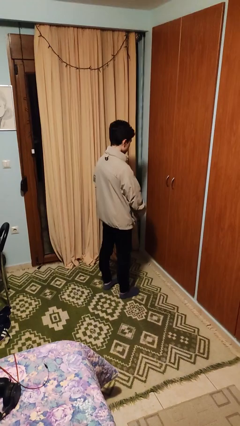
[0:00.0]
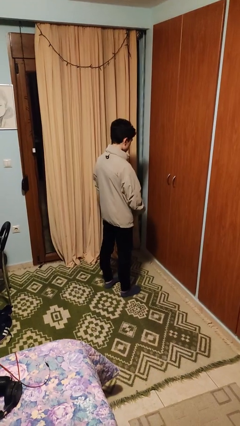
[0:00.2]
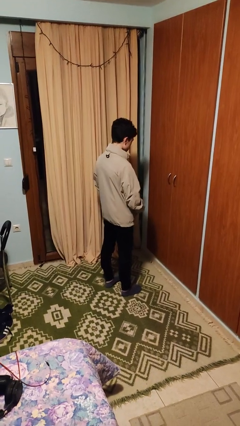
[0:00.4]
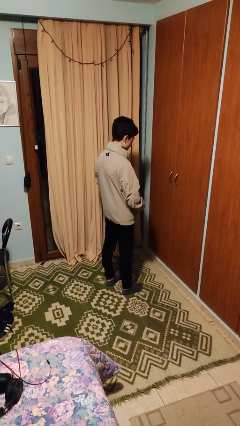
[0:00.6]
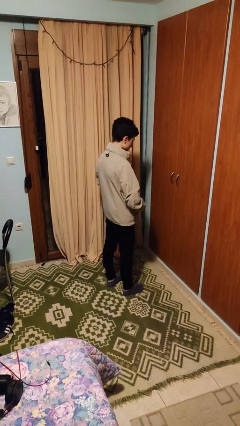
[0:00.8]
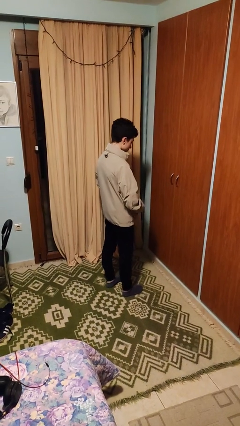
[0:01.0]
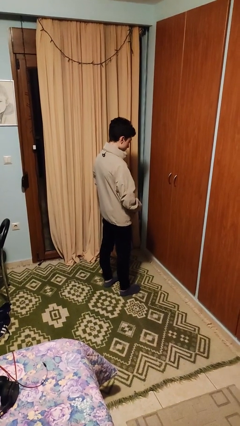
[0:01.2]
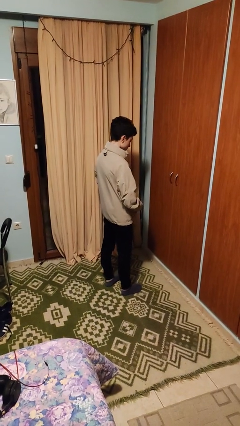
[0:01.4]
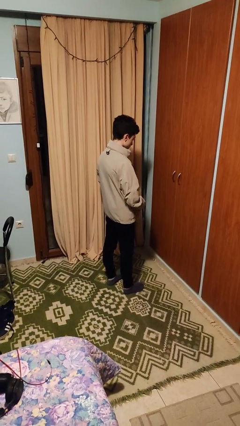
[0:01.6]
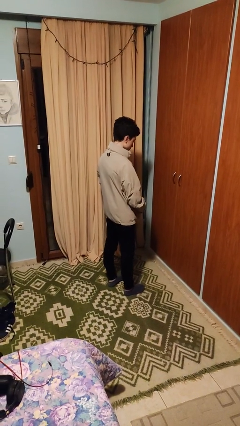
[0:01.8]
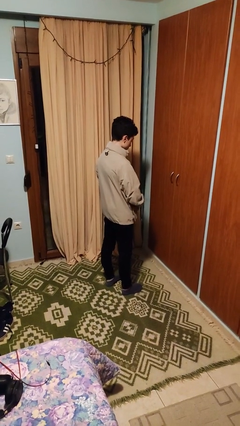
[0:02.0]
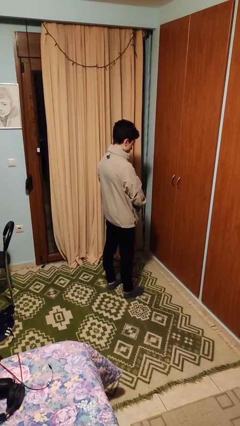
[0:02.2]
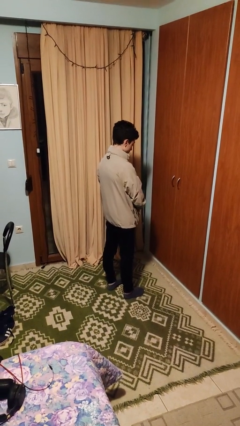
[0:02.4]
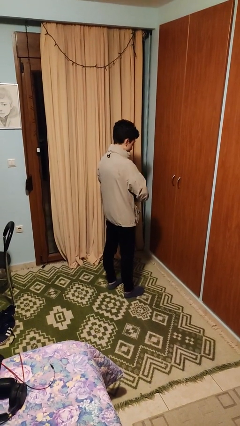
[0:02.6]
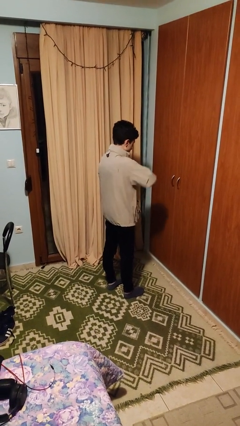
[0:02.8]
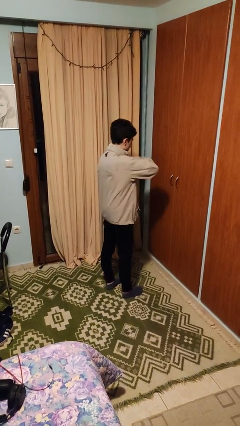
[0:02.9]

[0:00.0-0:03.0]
person zips up jacket

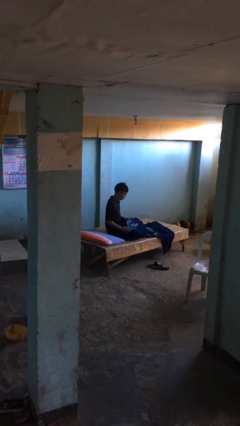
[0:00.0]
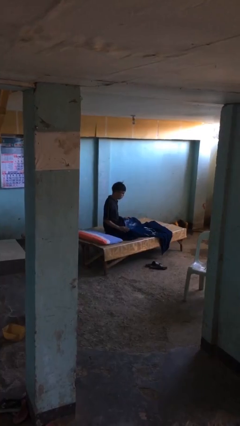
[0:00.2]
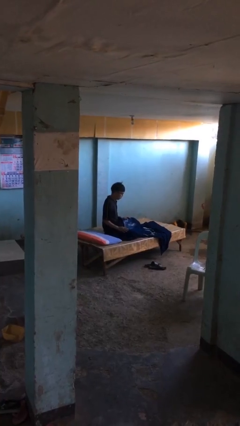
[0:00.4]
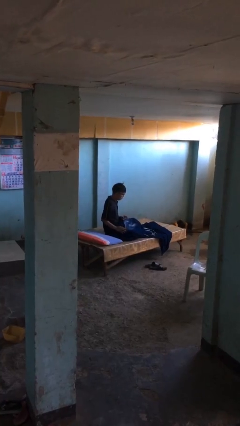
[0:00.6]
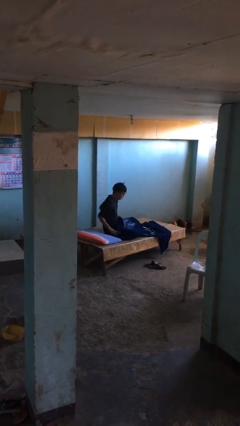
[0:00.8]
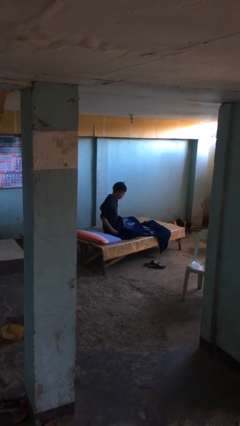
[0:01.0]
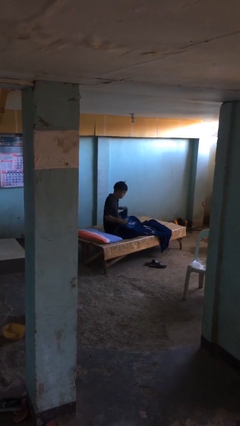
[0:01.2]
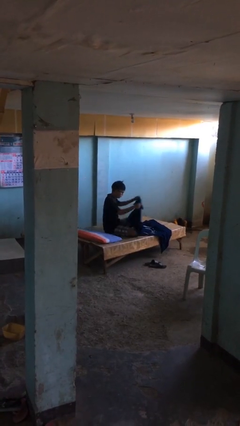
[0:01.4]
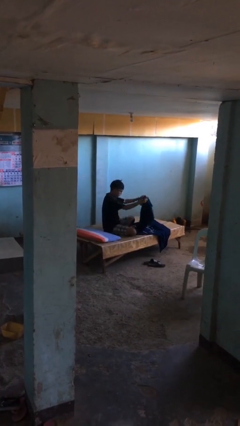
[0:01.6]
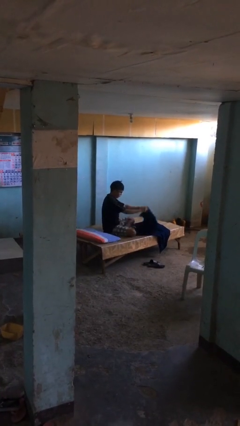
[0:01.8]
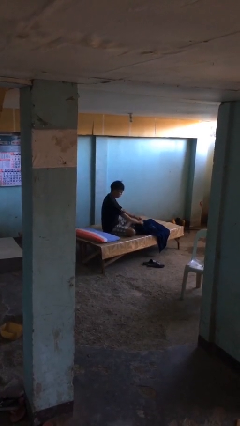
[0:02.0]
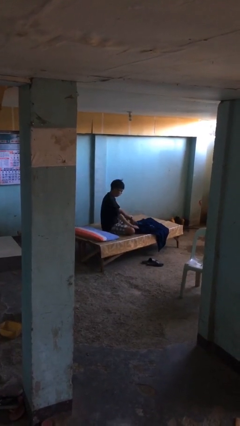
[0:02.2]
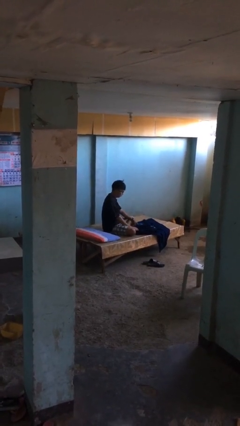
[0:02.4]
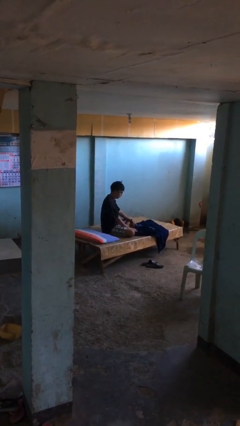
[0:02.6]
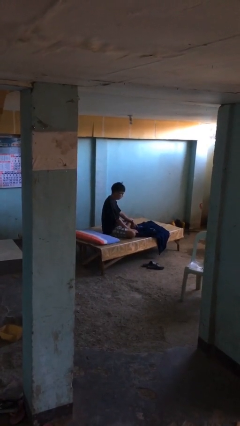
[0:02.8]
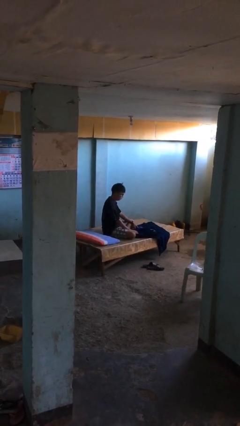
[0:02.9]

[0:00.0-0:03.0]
person uncovers with blanket

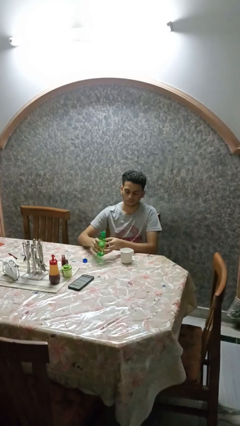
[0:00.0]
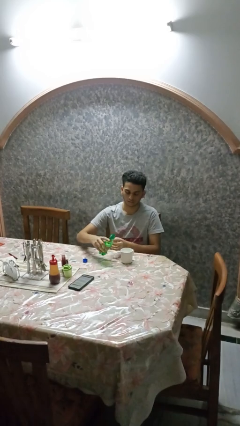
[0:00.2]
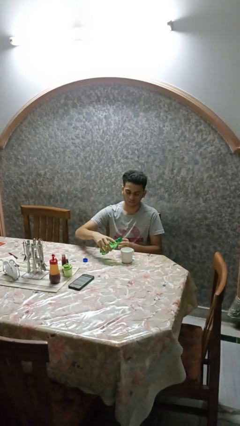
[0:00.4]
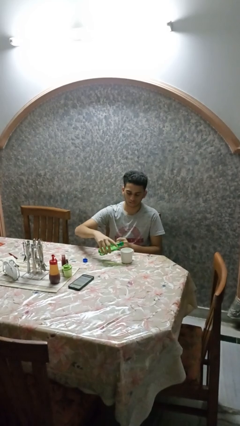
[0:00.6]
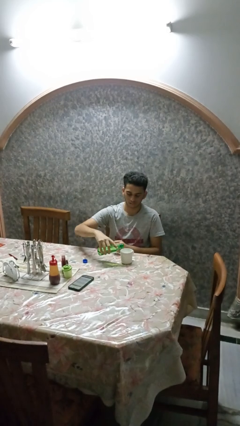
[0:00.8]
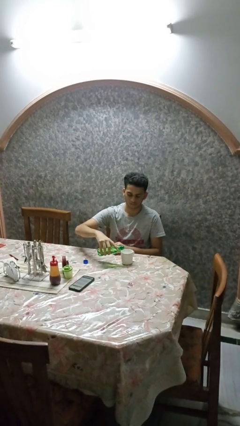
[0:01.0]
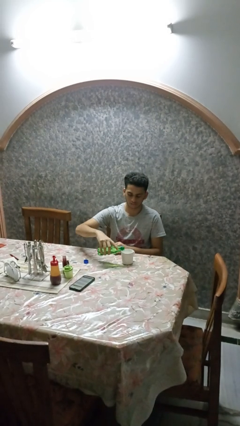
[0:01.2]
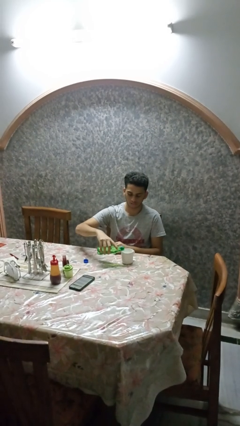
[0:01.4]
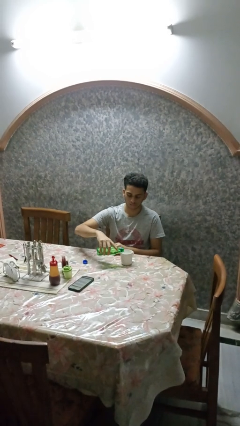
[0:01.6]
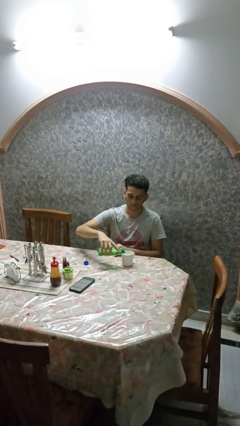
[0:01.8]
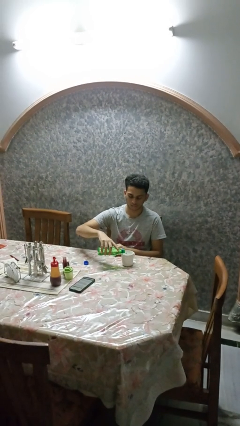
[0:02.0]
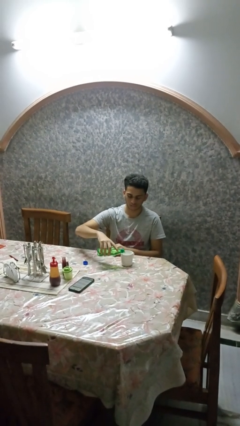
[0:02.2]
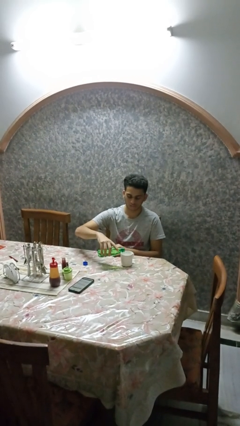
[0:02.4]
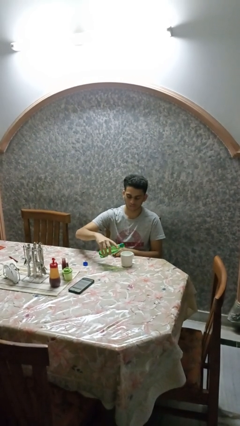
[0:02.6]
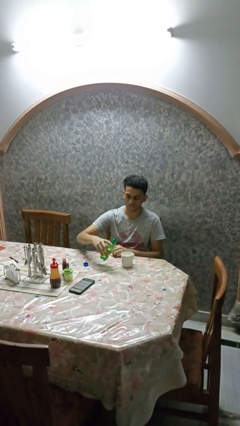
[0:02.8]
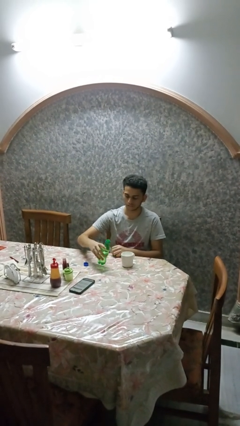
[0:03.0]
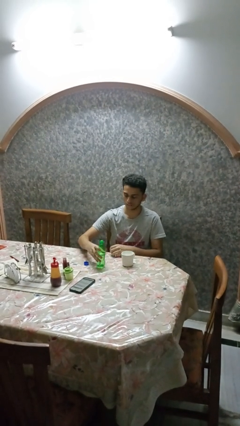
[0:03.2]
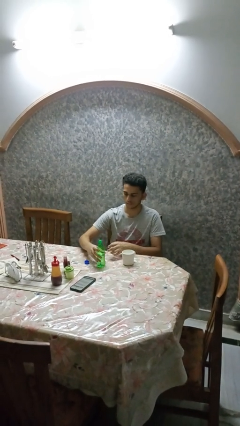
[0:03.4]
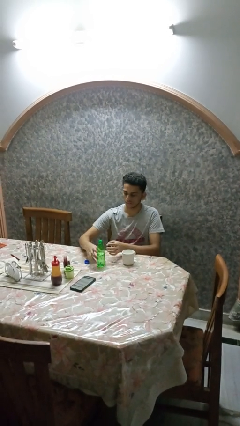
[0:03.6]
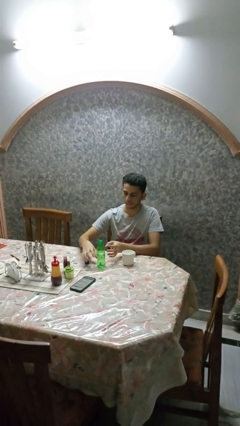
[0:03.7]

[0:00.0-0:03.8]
person pours liquid into cup

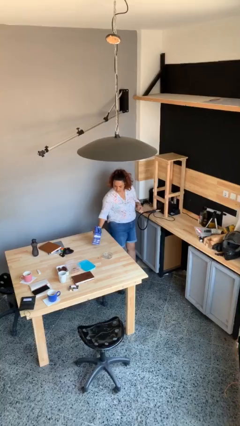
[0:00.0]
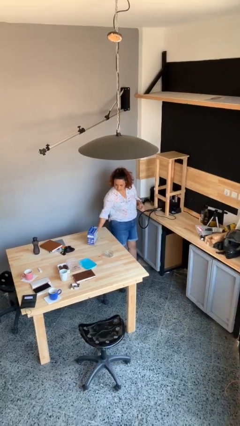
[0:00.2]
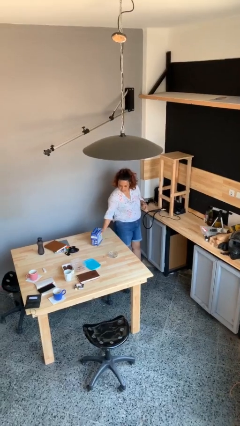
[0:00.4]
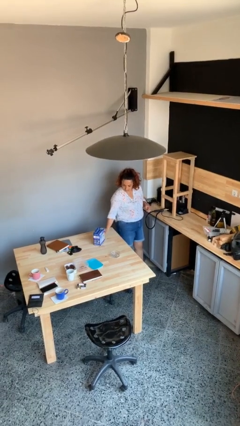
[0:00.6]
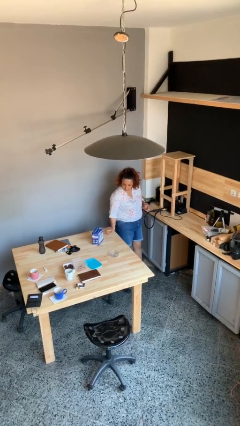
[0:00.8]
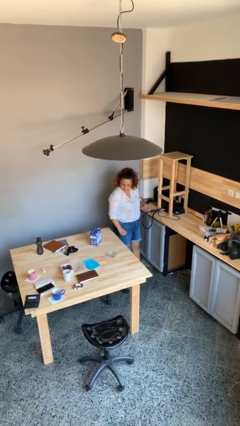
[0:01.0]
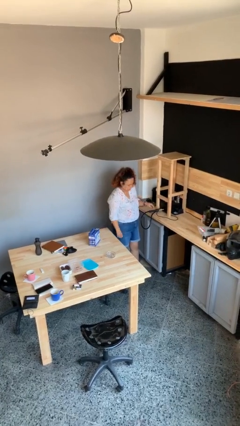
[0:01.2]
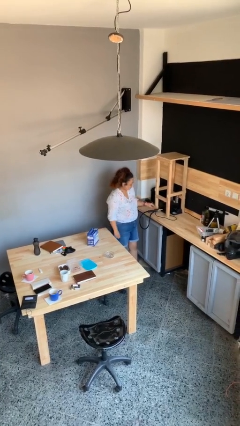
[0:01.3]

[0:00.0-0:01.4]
person puts down object on table

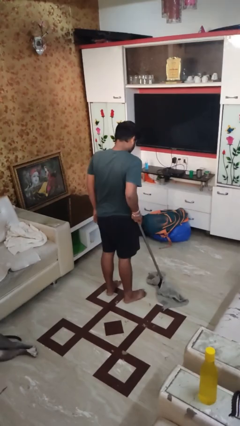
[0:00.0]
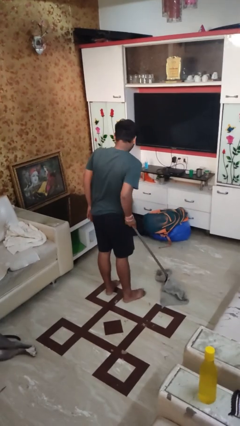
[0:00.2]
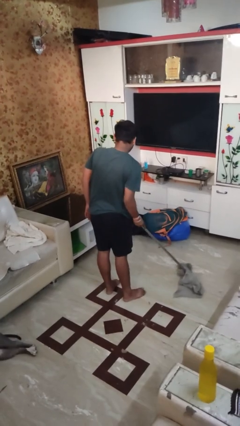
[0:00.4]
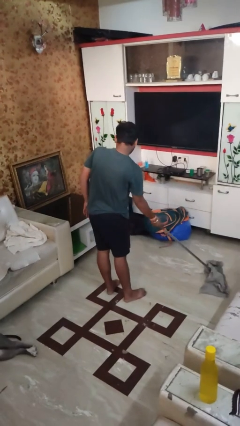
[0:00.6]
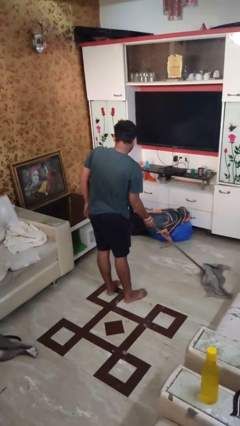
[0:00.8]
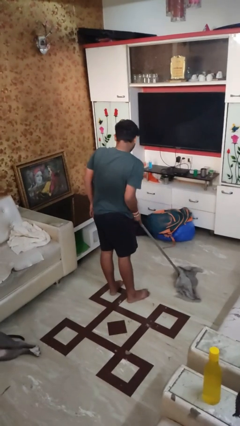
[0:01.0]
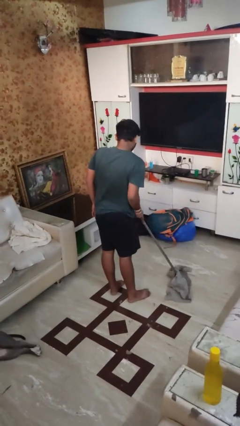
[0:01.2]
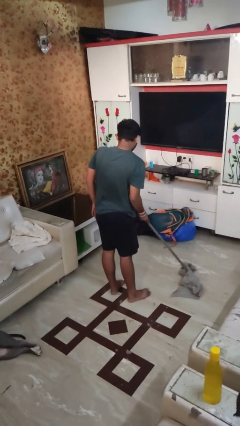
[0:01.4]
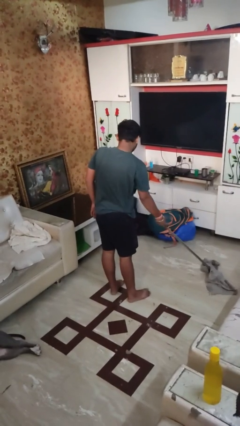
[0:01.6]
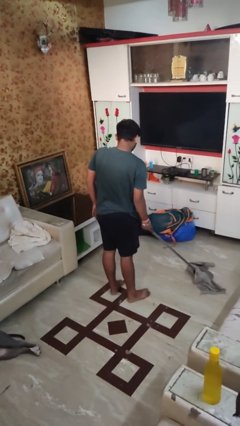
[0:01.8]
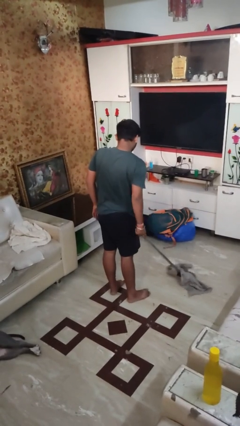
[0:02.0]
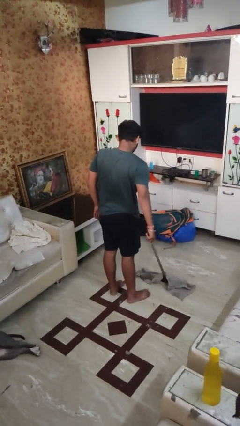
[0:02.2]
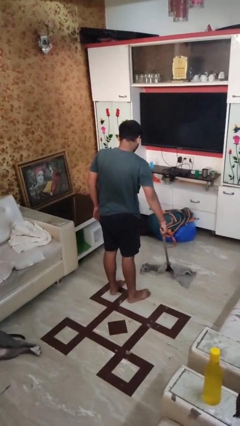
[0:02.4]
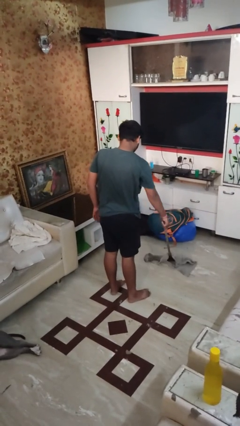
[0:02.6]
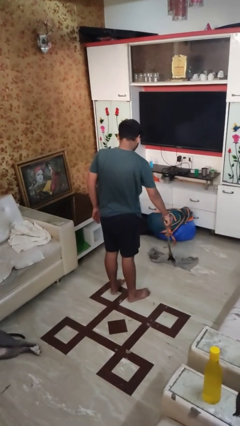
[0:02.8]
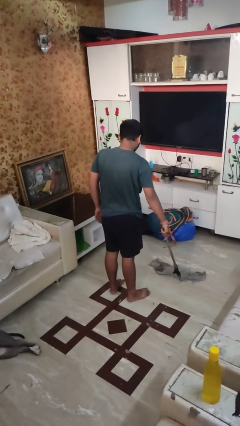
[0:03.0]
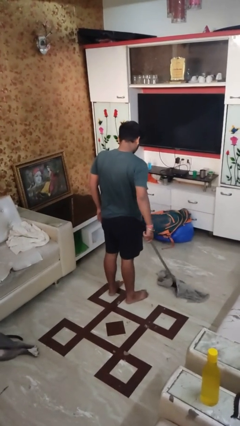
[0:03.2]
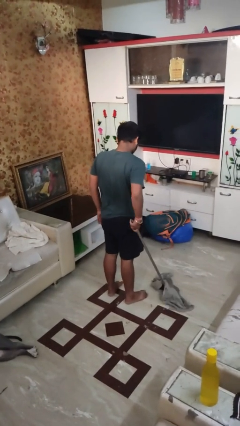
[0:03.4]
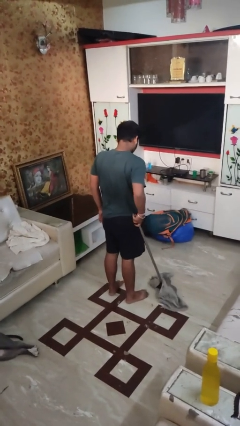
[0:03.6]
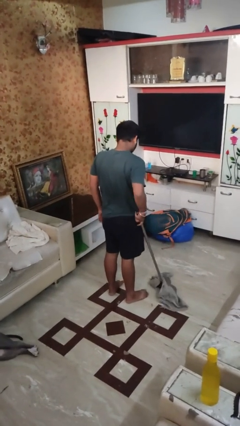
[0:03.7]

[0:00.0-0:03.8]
person mops

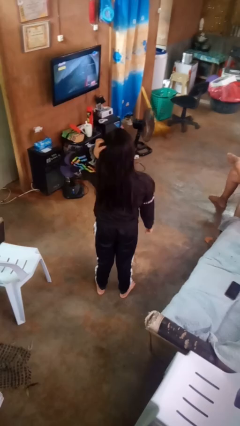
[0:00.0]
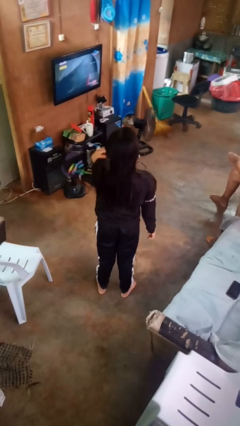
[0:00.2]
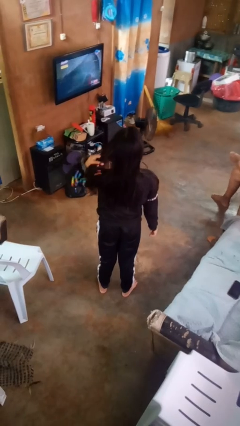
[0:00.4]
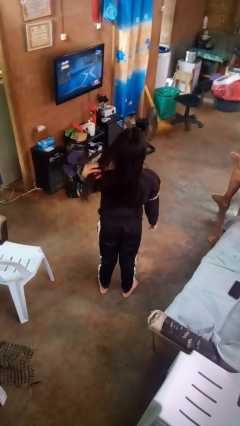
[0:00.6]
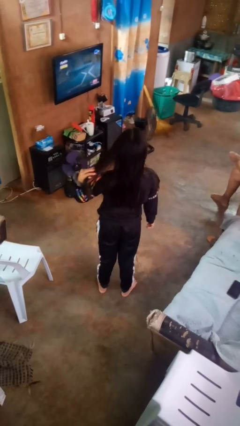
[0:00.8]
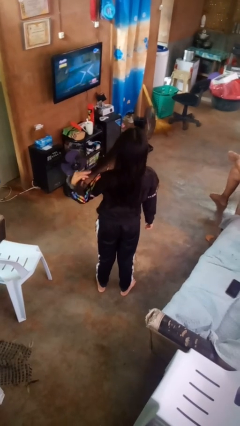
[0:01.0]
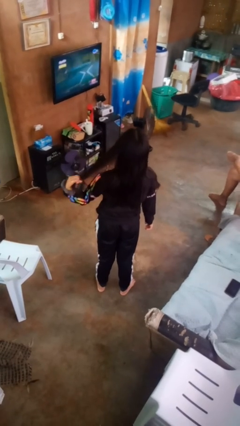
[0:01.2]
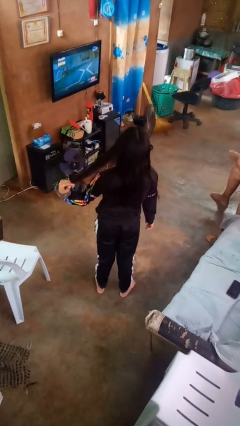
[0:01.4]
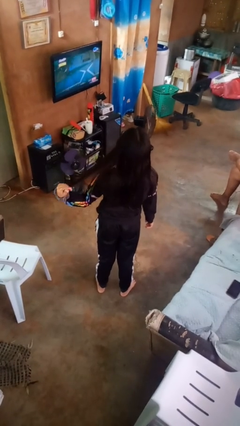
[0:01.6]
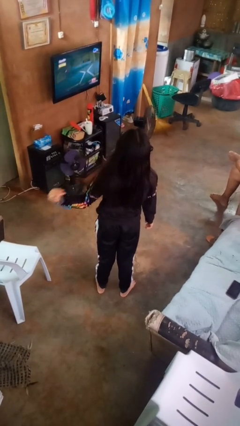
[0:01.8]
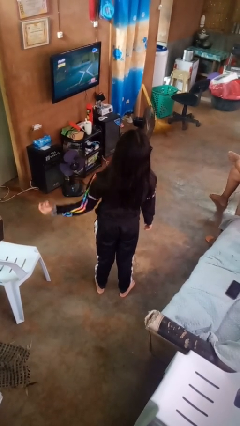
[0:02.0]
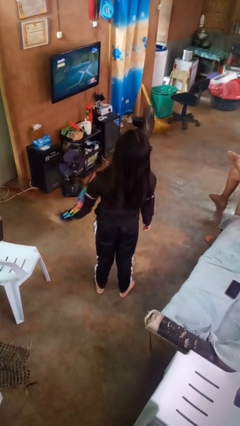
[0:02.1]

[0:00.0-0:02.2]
person strokes hair

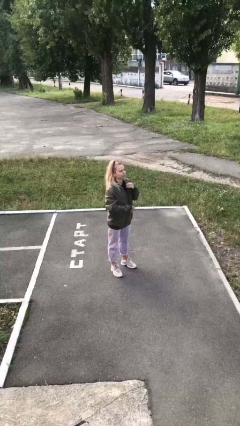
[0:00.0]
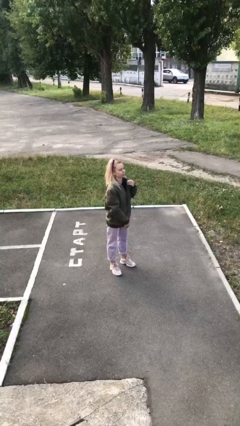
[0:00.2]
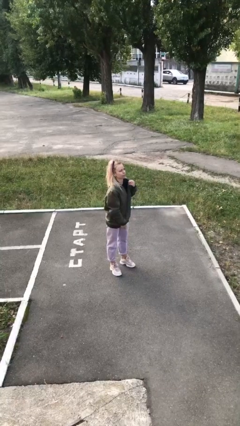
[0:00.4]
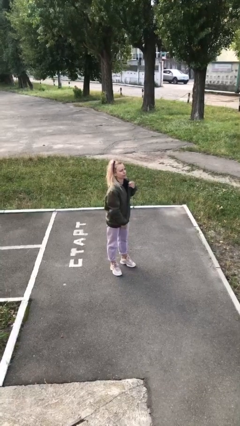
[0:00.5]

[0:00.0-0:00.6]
person unzips jacket
